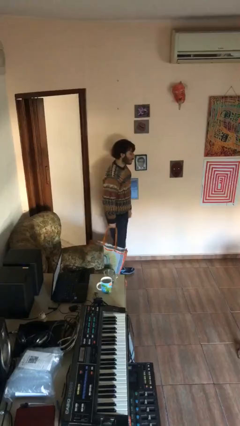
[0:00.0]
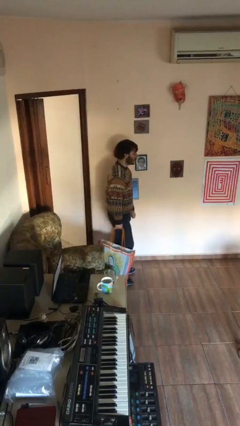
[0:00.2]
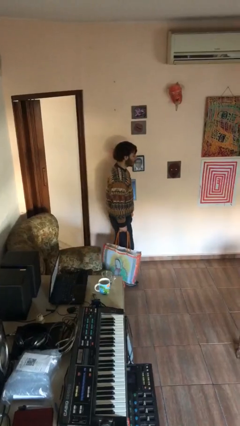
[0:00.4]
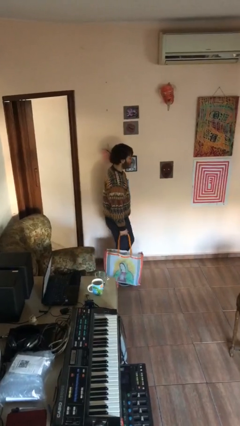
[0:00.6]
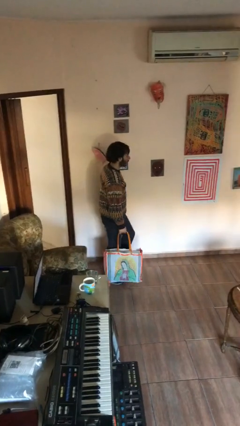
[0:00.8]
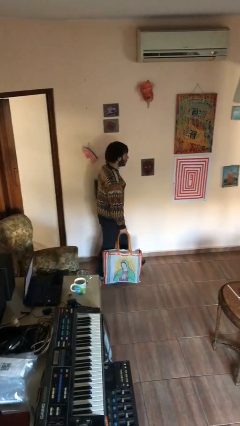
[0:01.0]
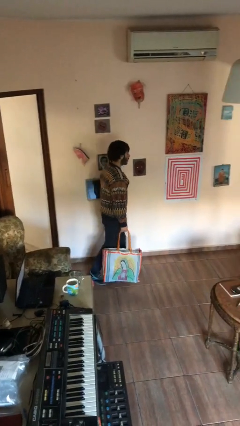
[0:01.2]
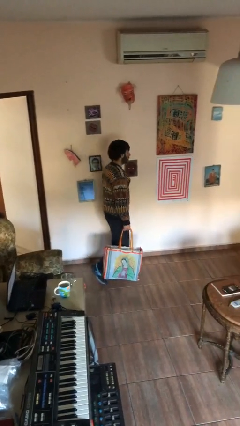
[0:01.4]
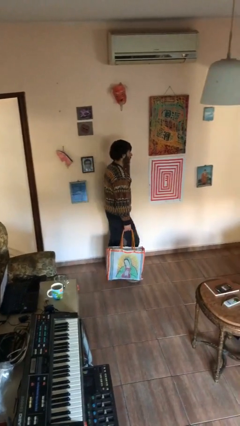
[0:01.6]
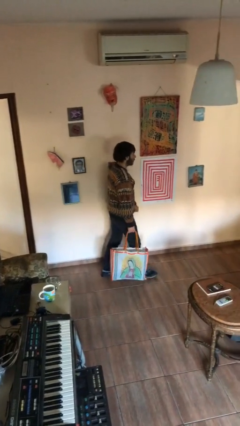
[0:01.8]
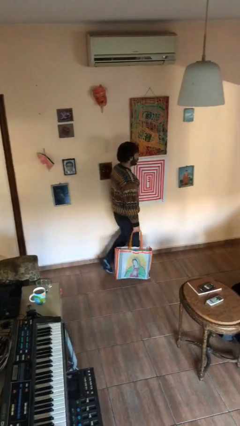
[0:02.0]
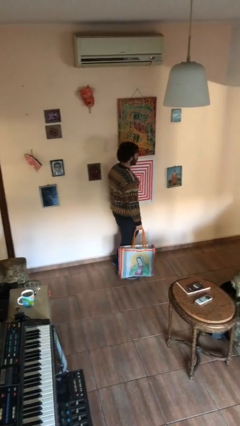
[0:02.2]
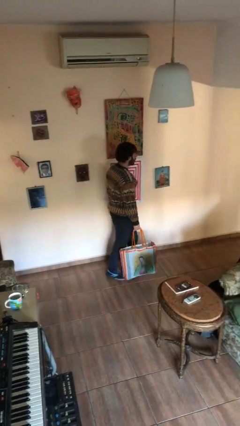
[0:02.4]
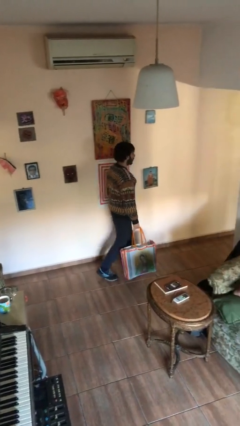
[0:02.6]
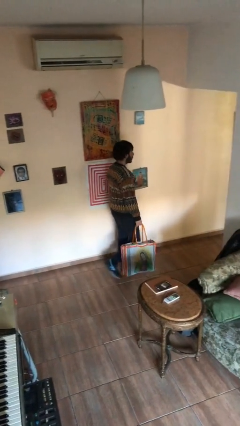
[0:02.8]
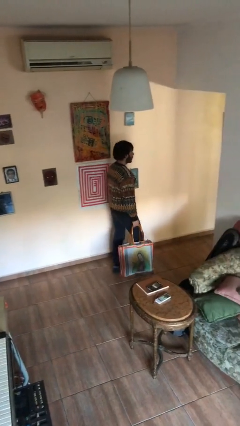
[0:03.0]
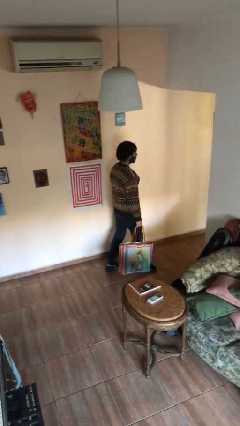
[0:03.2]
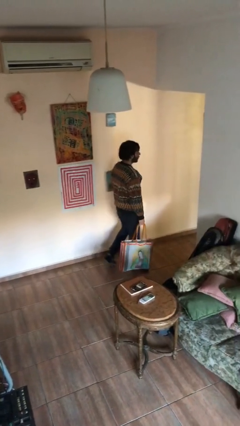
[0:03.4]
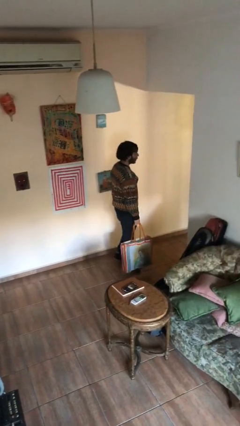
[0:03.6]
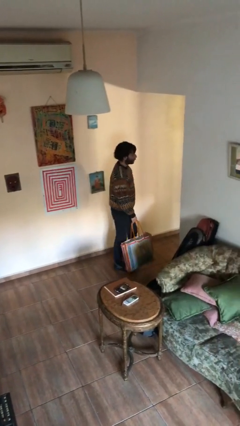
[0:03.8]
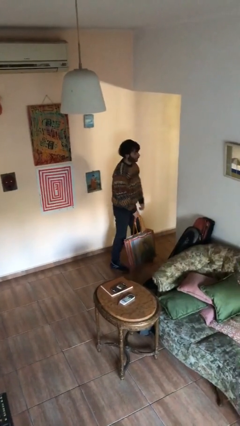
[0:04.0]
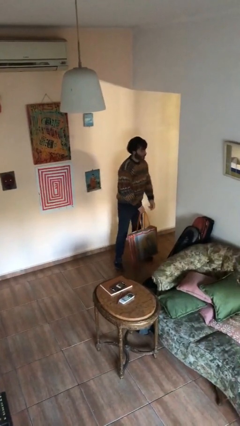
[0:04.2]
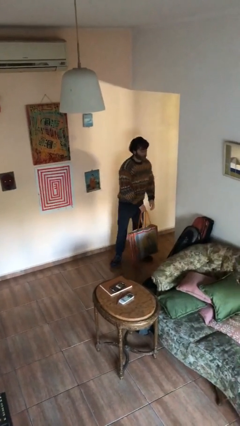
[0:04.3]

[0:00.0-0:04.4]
person carries groceries

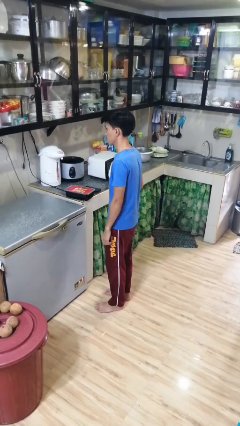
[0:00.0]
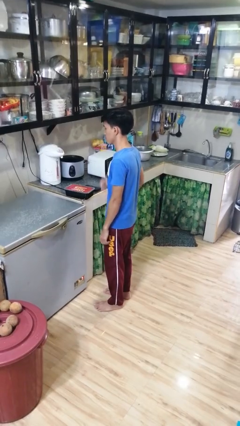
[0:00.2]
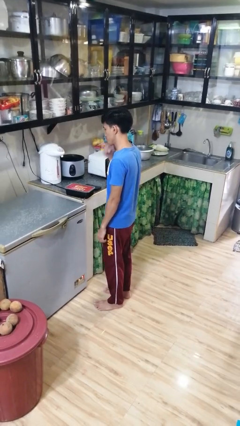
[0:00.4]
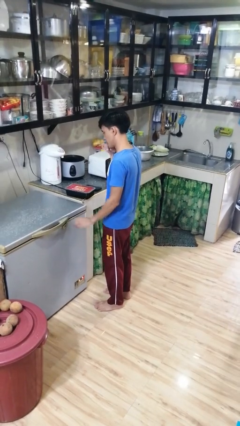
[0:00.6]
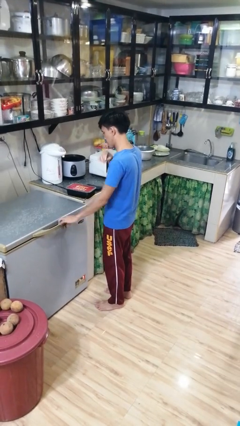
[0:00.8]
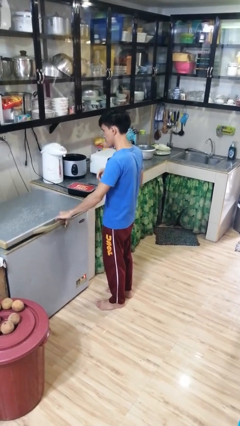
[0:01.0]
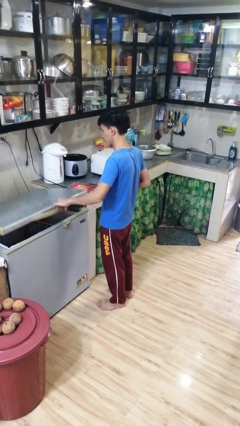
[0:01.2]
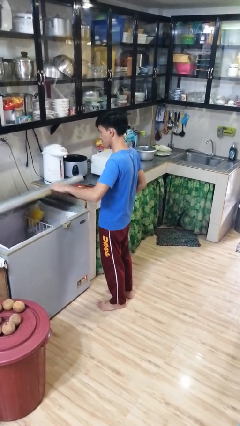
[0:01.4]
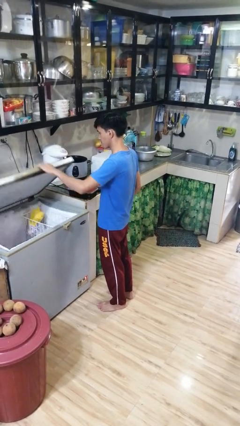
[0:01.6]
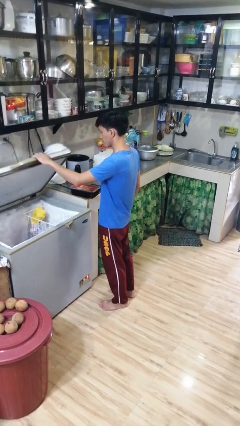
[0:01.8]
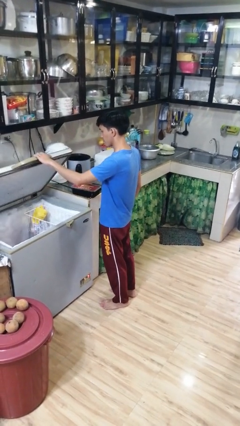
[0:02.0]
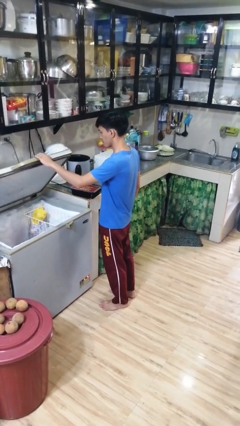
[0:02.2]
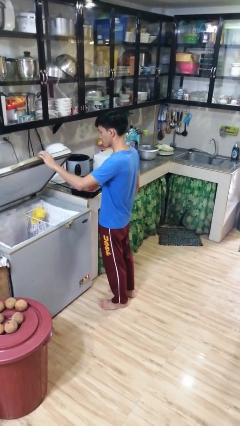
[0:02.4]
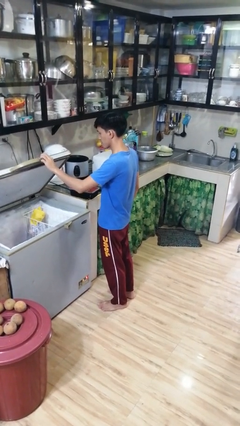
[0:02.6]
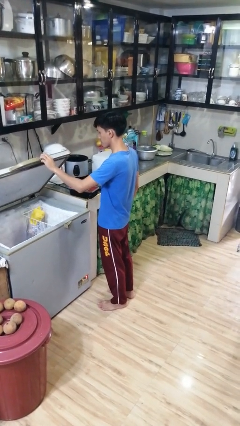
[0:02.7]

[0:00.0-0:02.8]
person opens refrigerator

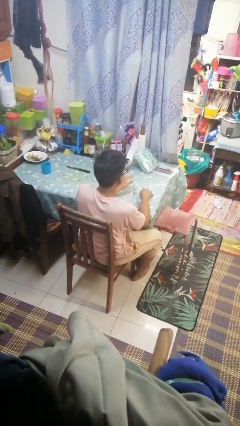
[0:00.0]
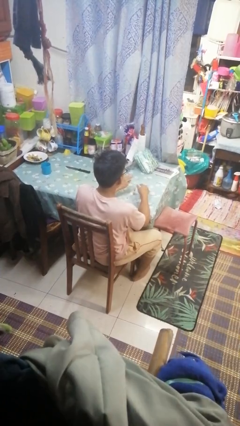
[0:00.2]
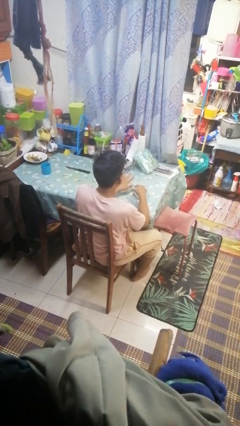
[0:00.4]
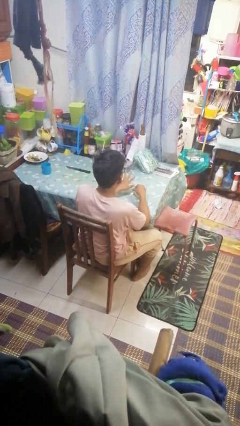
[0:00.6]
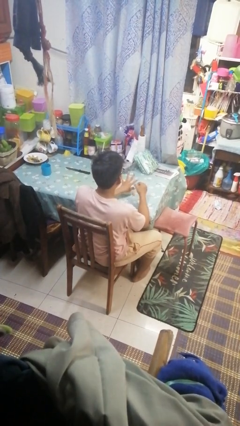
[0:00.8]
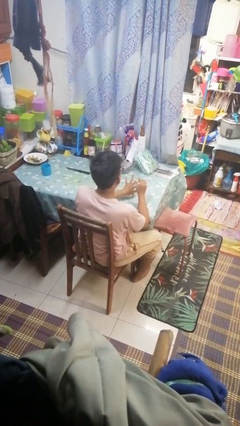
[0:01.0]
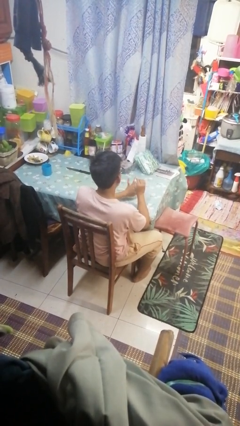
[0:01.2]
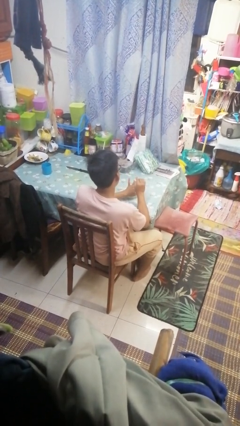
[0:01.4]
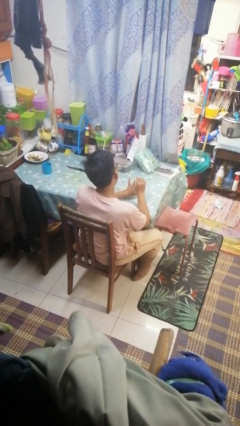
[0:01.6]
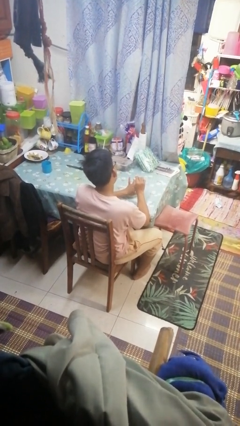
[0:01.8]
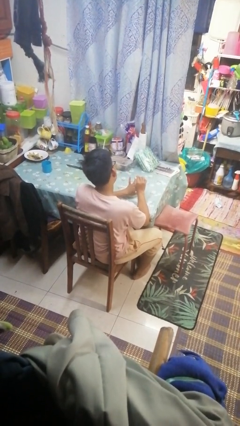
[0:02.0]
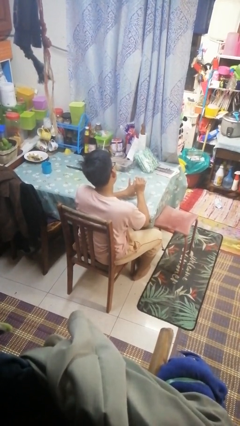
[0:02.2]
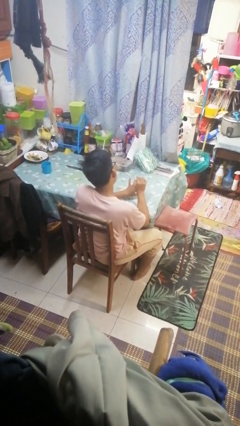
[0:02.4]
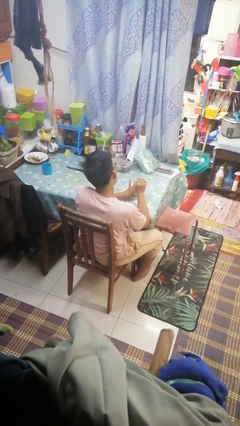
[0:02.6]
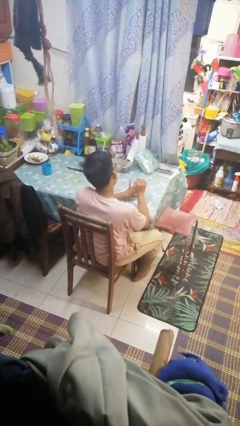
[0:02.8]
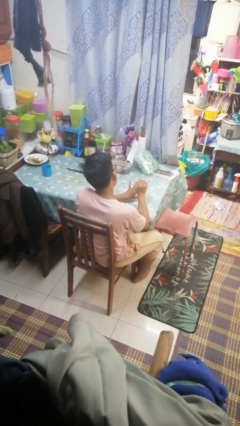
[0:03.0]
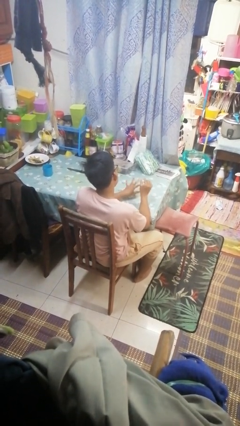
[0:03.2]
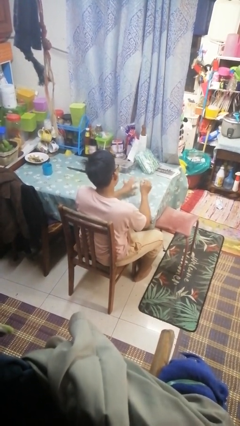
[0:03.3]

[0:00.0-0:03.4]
person paints fingernails

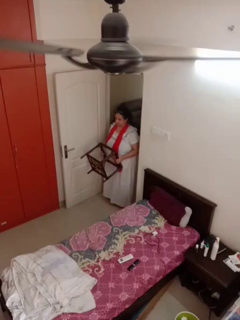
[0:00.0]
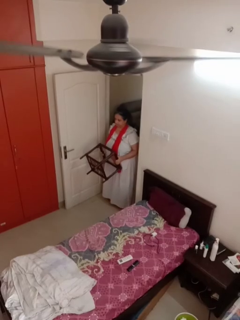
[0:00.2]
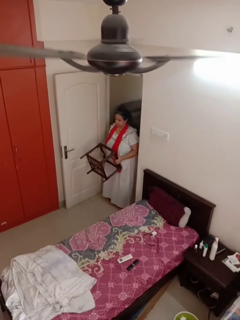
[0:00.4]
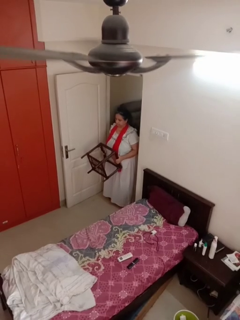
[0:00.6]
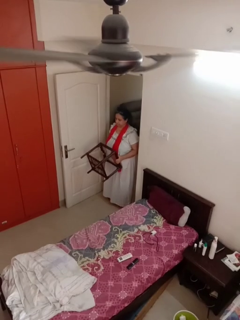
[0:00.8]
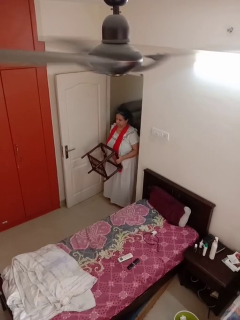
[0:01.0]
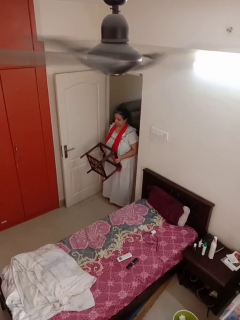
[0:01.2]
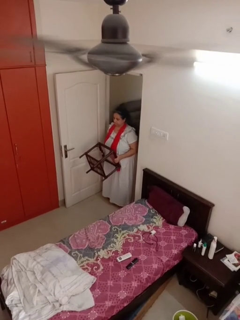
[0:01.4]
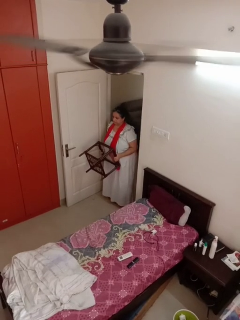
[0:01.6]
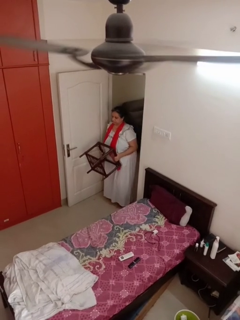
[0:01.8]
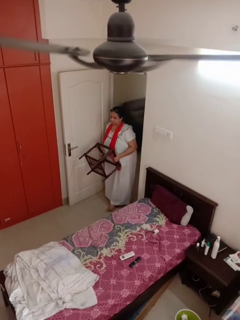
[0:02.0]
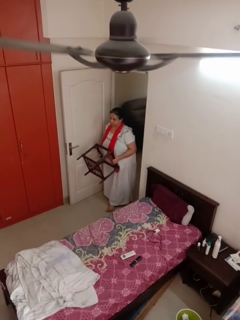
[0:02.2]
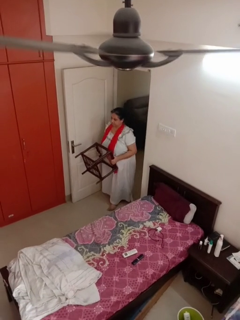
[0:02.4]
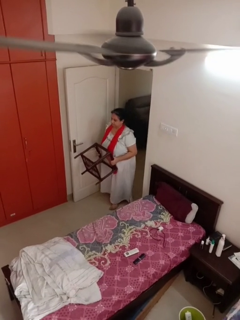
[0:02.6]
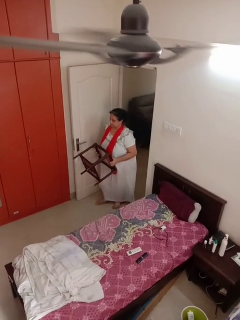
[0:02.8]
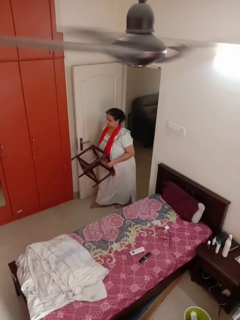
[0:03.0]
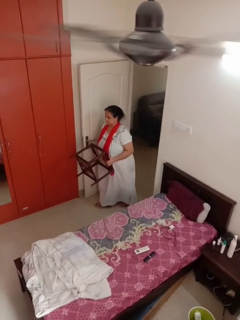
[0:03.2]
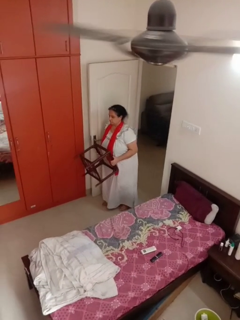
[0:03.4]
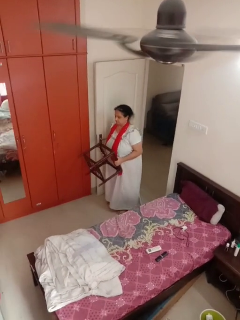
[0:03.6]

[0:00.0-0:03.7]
person carries furniture

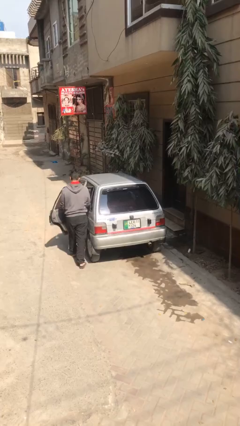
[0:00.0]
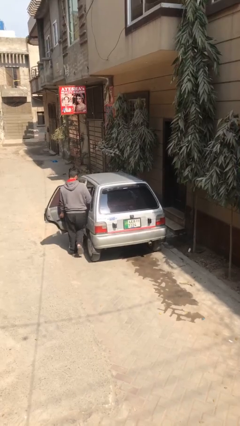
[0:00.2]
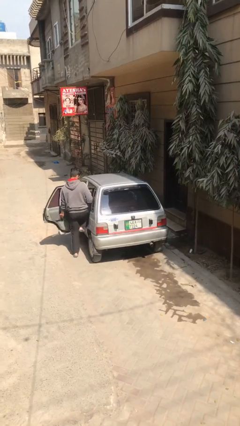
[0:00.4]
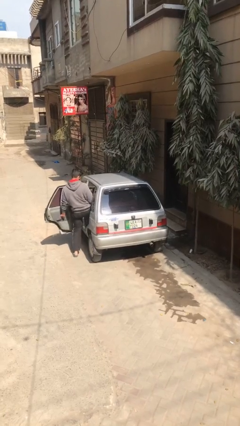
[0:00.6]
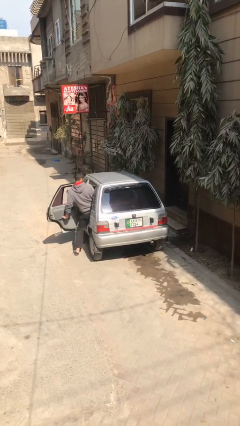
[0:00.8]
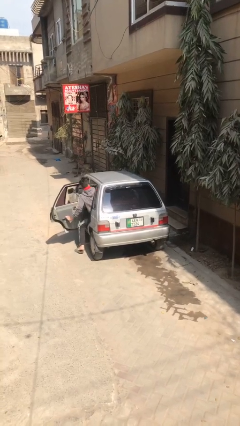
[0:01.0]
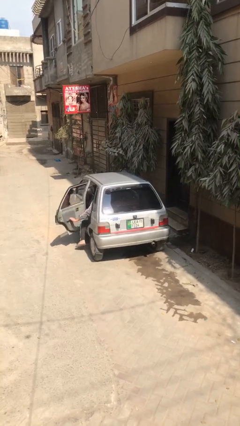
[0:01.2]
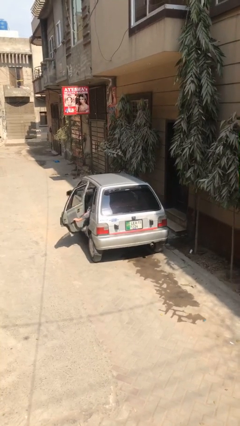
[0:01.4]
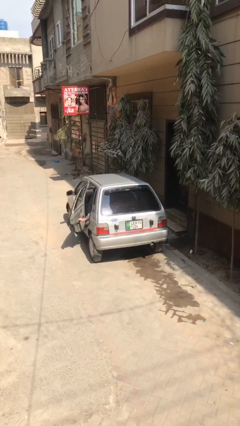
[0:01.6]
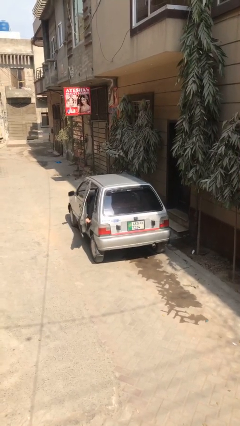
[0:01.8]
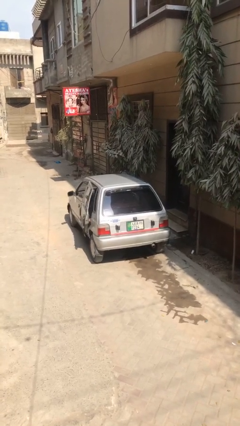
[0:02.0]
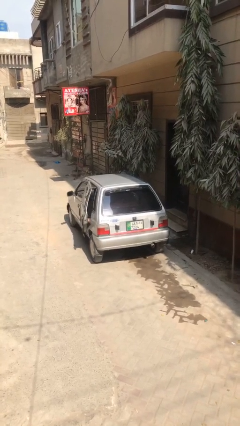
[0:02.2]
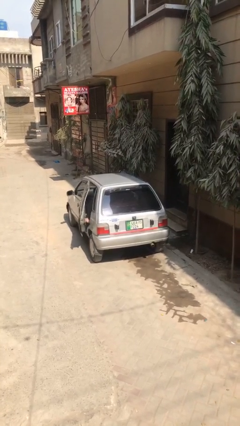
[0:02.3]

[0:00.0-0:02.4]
car picks up person

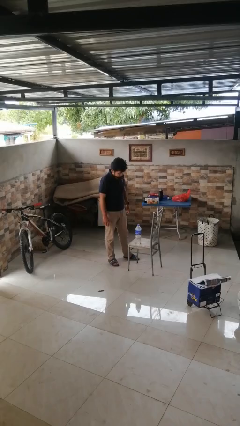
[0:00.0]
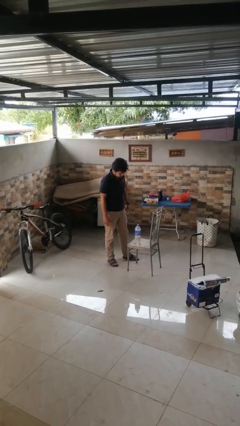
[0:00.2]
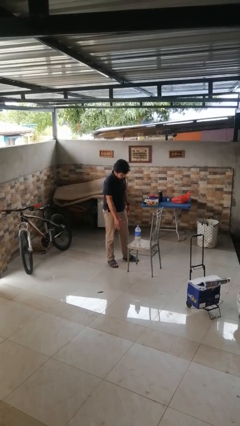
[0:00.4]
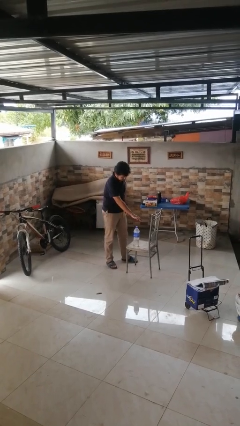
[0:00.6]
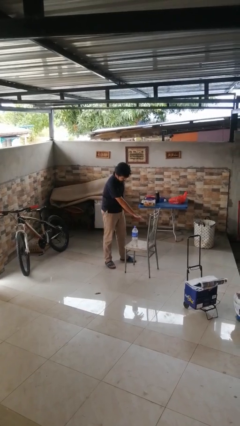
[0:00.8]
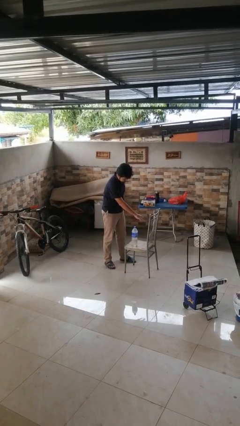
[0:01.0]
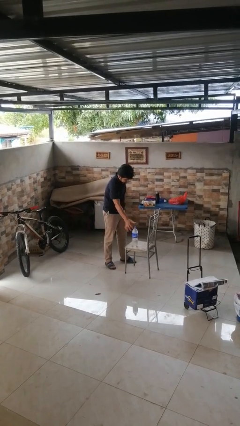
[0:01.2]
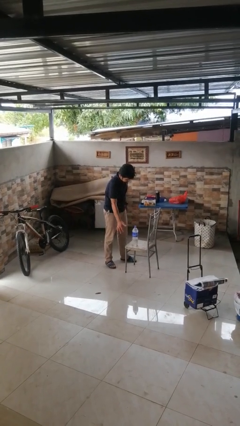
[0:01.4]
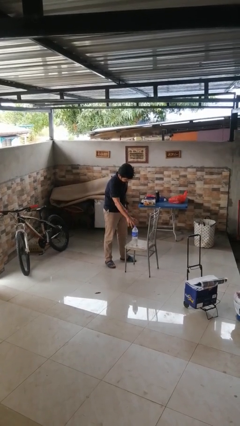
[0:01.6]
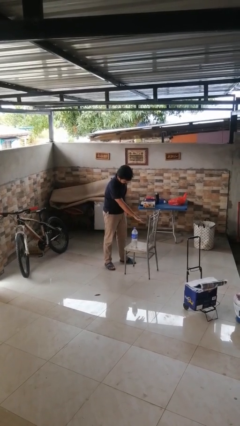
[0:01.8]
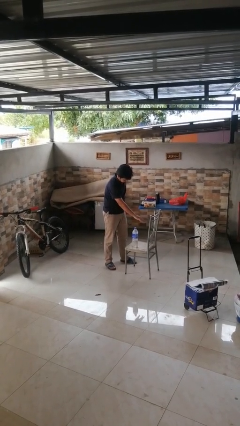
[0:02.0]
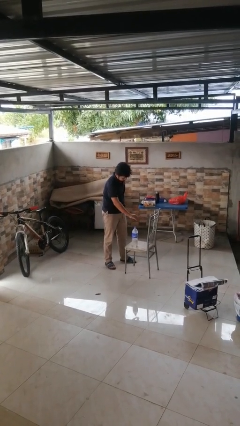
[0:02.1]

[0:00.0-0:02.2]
person waves hand over object
